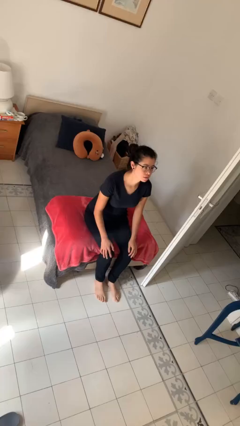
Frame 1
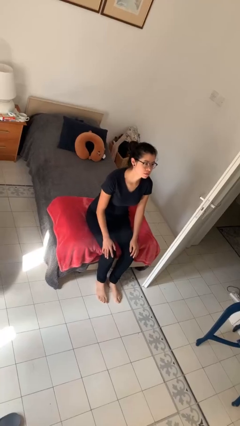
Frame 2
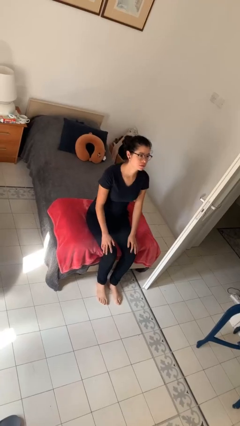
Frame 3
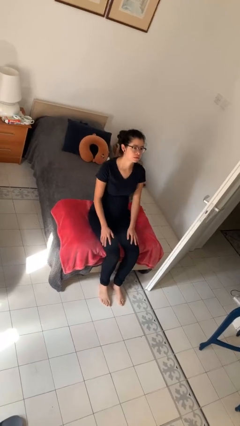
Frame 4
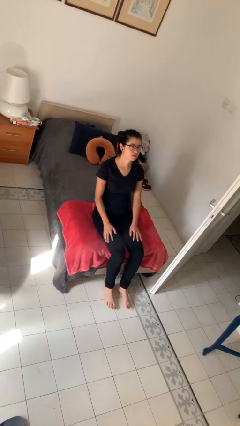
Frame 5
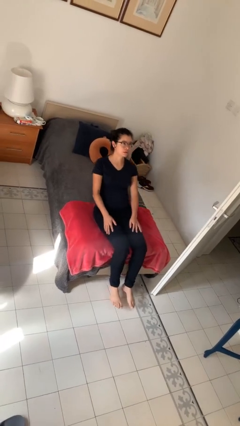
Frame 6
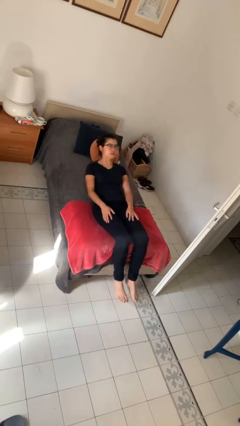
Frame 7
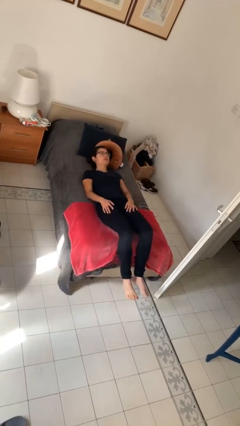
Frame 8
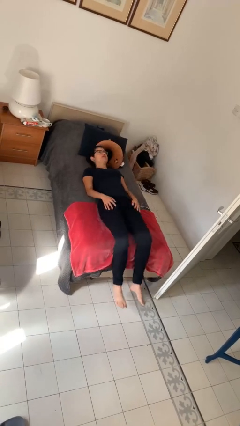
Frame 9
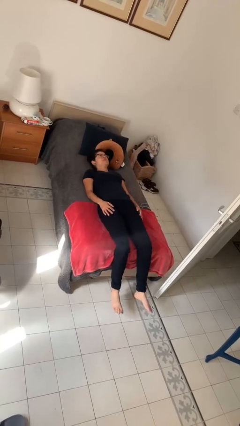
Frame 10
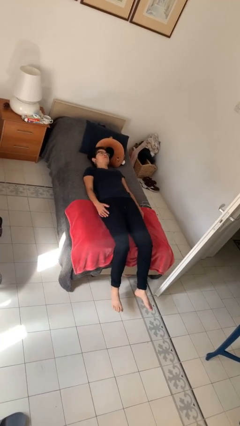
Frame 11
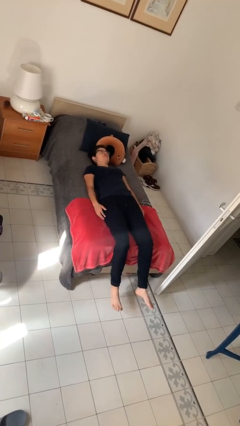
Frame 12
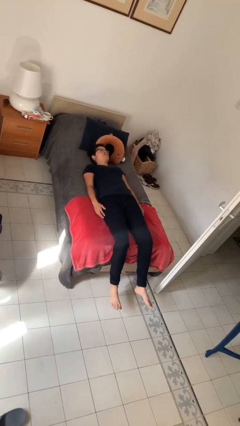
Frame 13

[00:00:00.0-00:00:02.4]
person lies down on bed

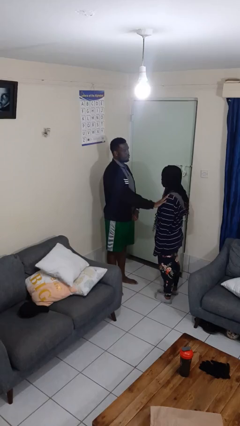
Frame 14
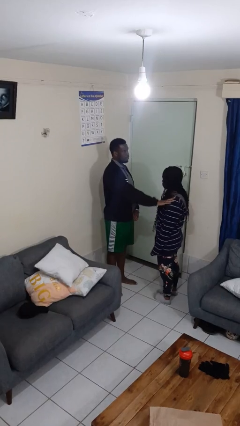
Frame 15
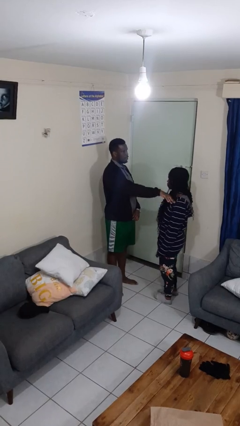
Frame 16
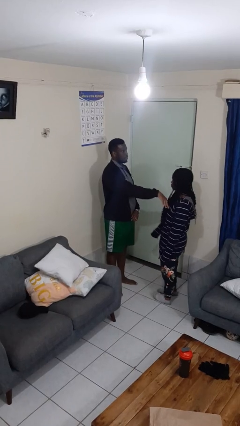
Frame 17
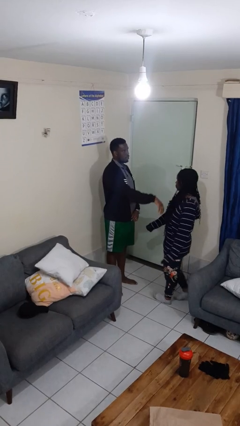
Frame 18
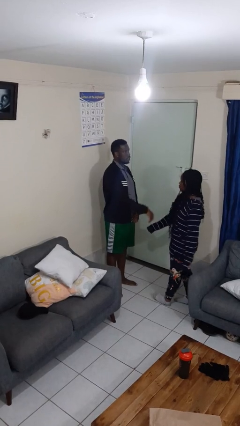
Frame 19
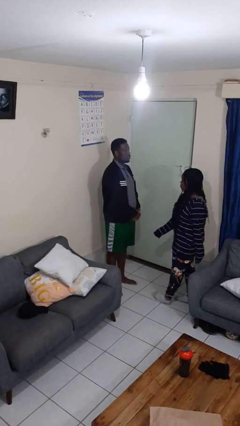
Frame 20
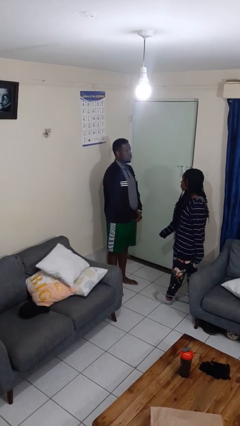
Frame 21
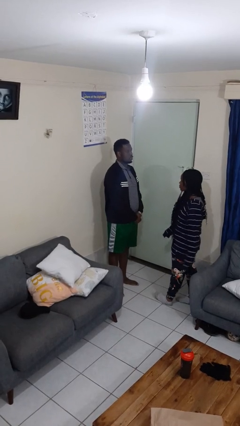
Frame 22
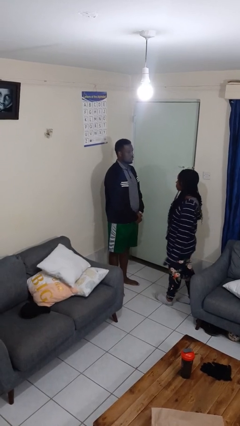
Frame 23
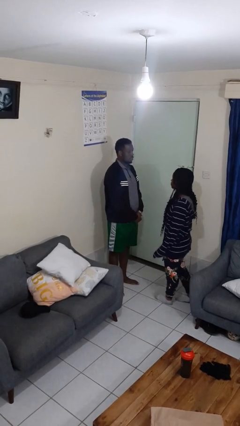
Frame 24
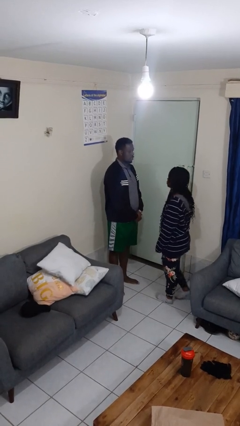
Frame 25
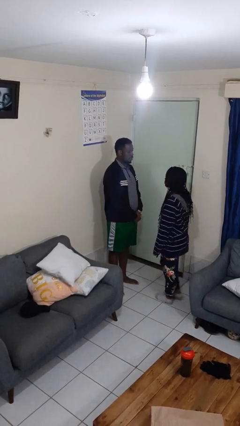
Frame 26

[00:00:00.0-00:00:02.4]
person shoves person

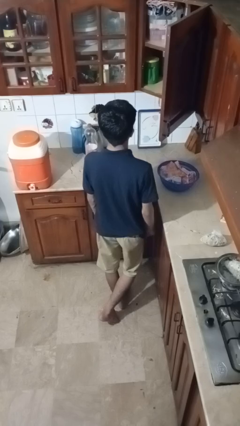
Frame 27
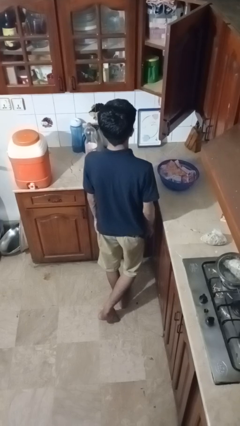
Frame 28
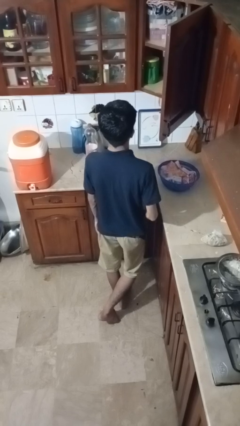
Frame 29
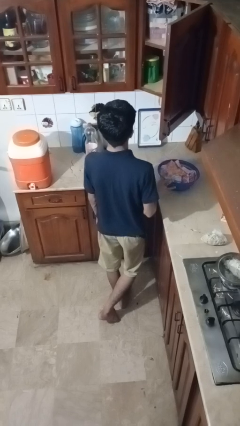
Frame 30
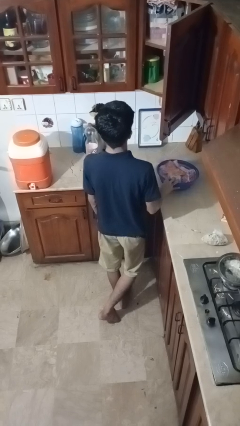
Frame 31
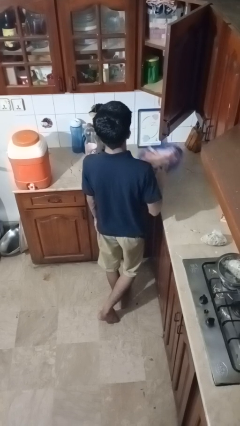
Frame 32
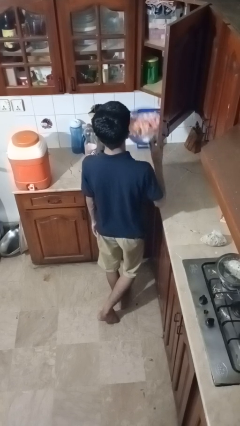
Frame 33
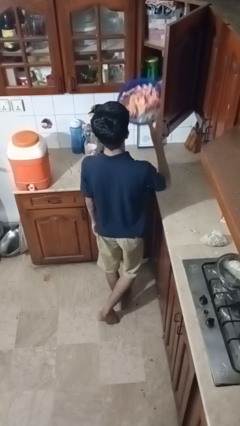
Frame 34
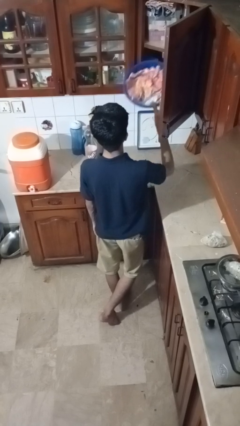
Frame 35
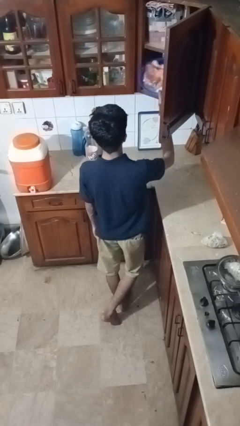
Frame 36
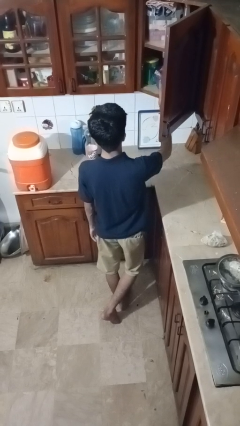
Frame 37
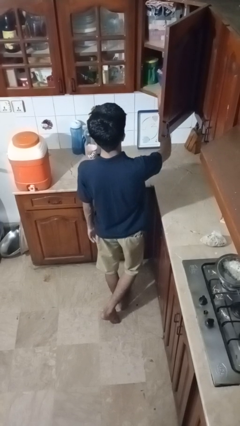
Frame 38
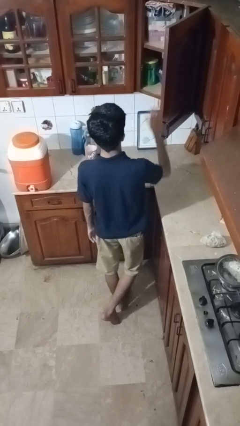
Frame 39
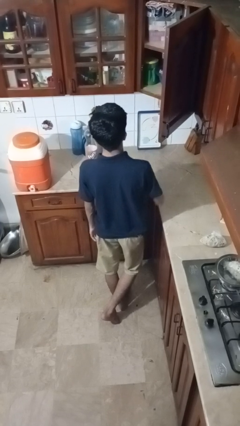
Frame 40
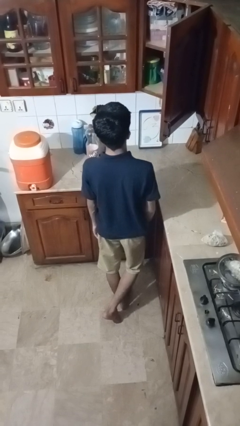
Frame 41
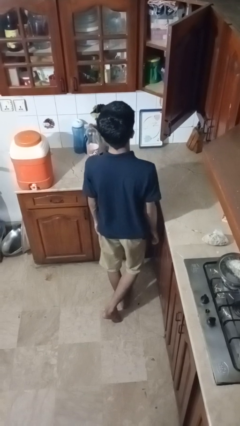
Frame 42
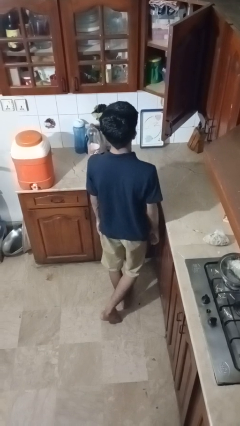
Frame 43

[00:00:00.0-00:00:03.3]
person puts object in cabinet

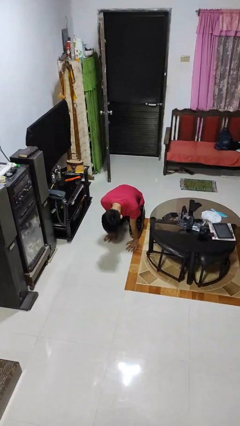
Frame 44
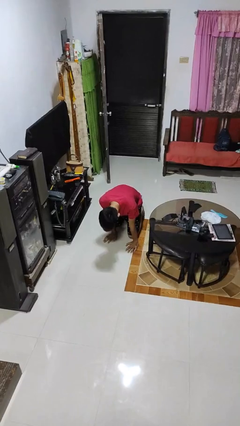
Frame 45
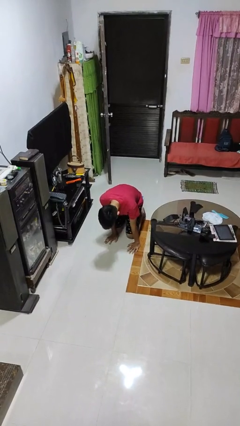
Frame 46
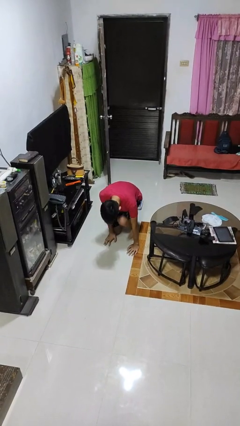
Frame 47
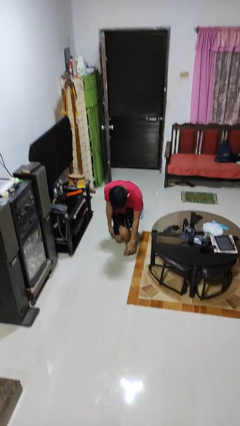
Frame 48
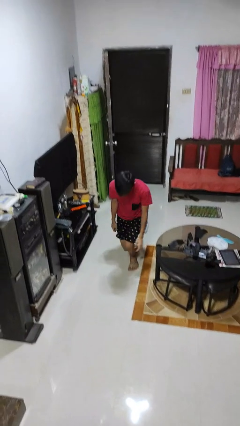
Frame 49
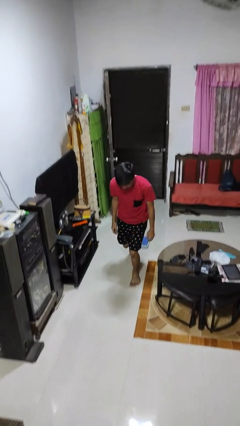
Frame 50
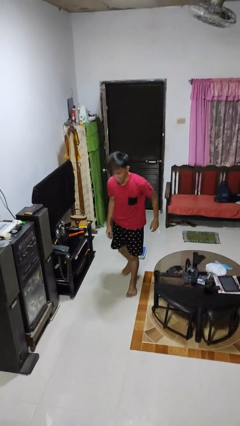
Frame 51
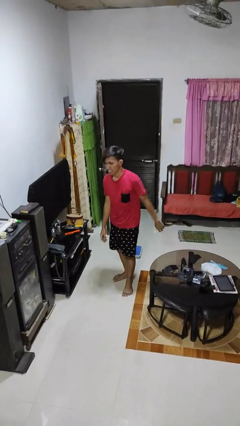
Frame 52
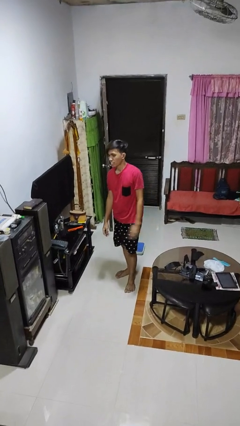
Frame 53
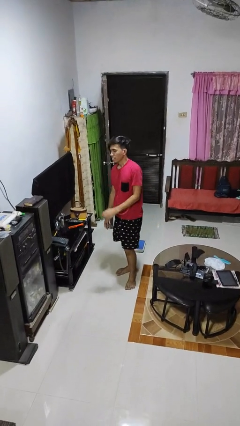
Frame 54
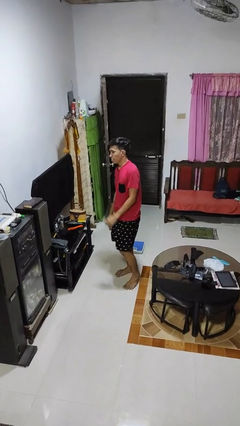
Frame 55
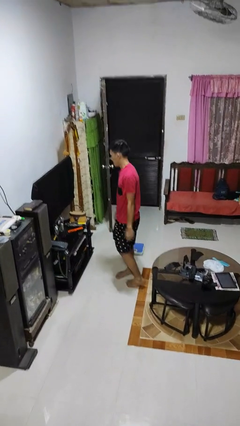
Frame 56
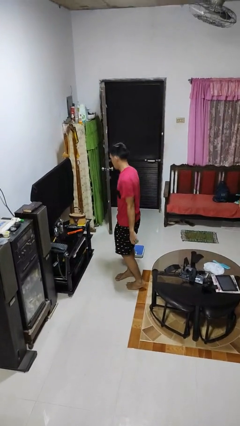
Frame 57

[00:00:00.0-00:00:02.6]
person stands up from floor

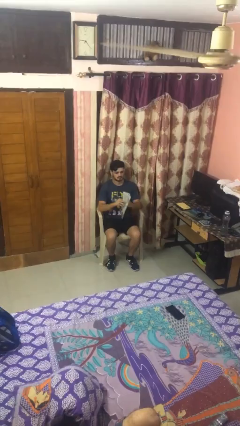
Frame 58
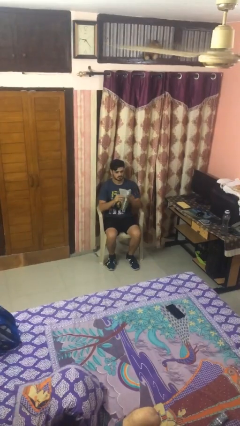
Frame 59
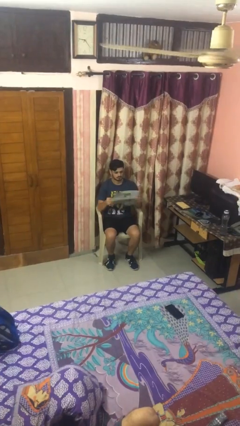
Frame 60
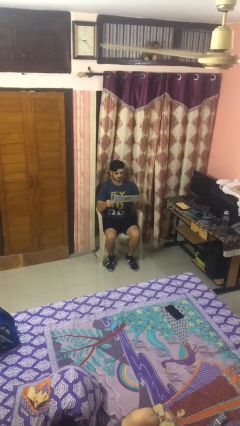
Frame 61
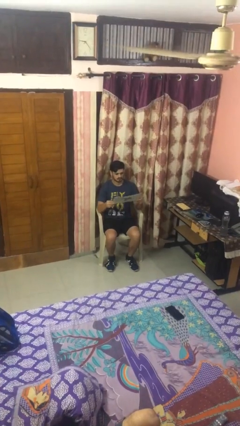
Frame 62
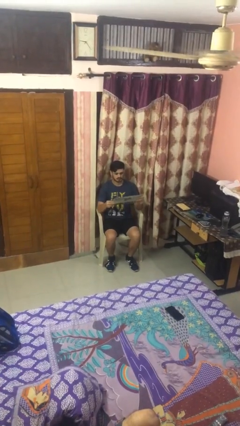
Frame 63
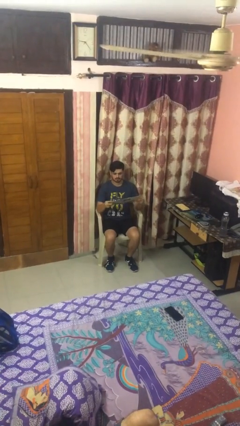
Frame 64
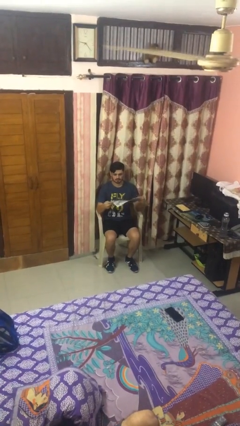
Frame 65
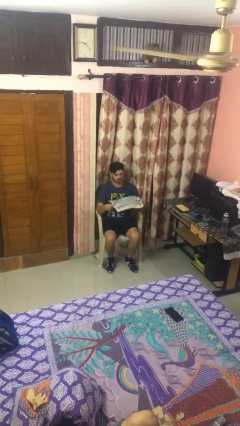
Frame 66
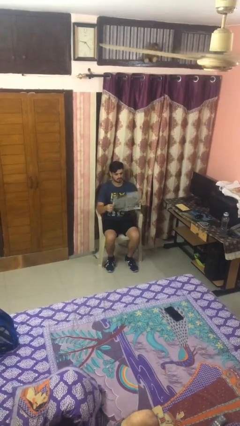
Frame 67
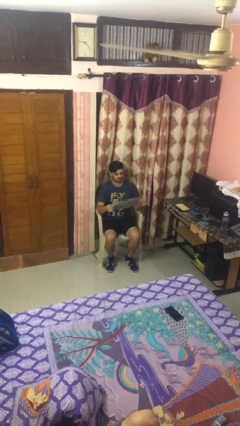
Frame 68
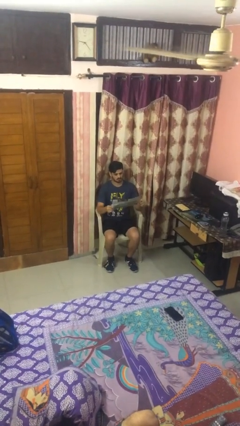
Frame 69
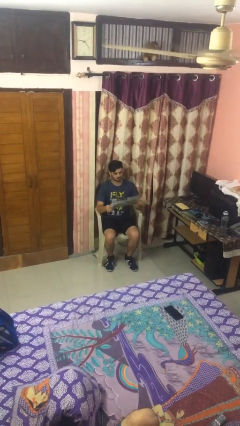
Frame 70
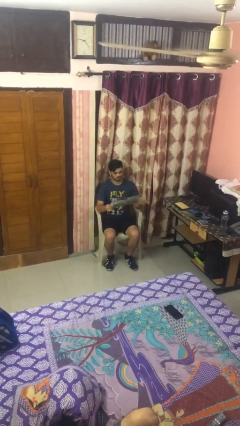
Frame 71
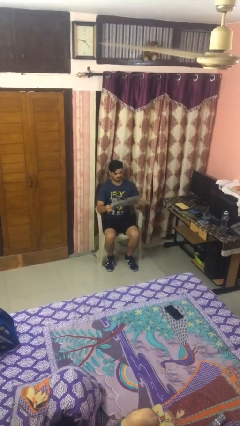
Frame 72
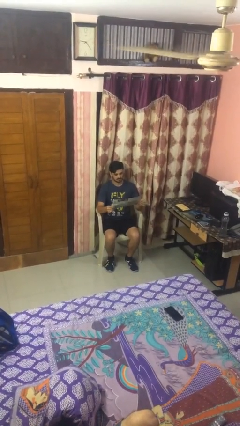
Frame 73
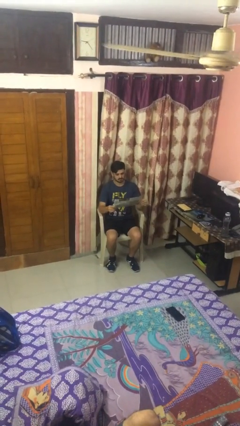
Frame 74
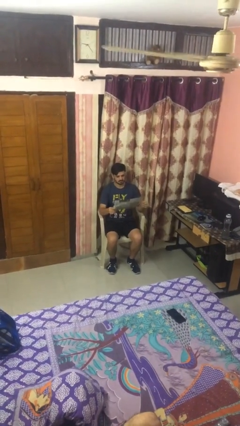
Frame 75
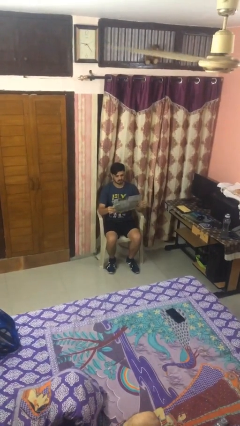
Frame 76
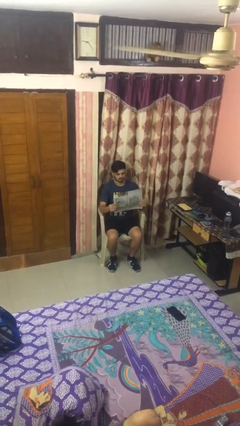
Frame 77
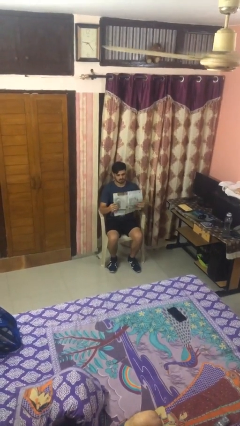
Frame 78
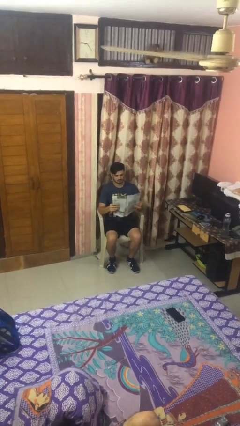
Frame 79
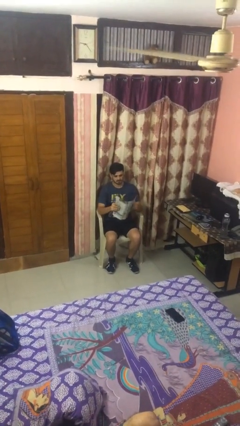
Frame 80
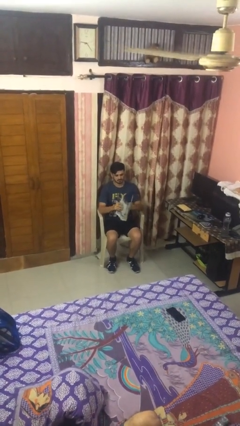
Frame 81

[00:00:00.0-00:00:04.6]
person reads newspaper

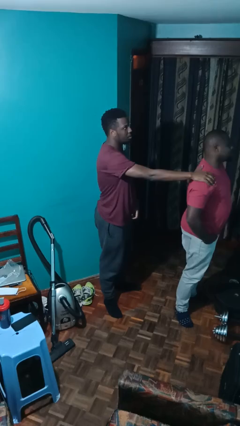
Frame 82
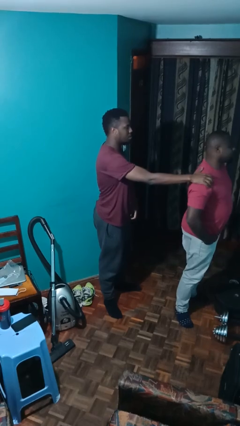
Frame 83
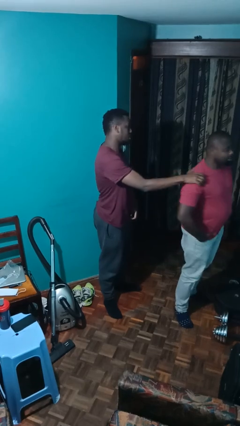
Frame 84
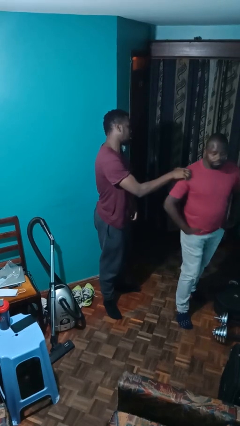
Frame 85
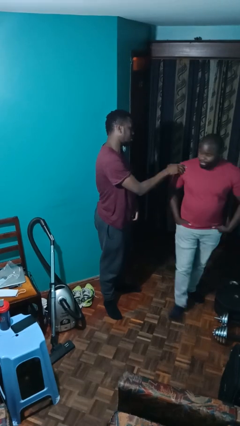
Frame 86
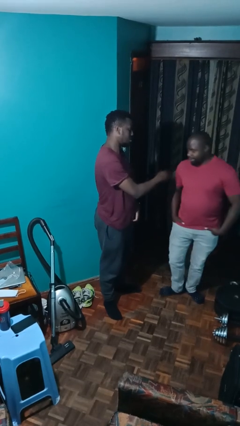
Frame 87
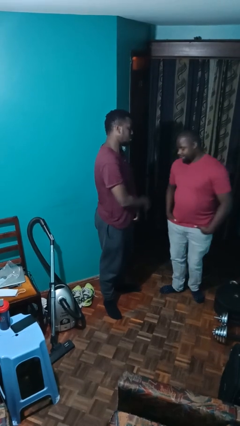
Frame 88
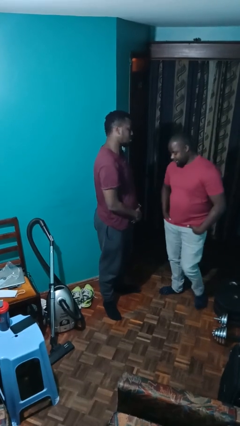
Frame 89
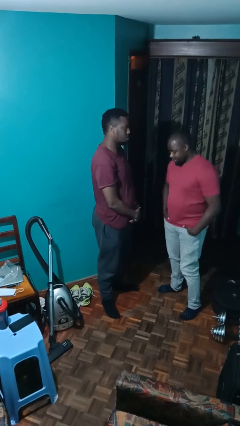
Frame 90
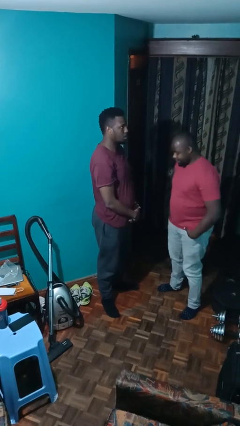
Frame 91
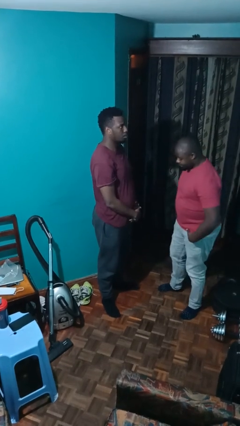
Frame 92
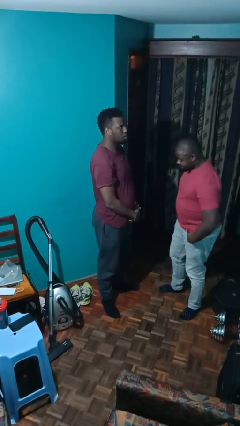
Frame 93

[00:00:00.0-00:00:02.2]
person spins person around
